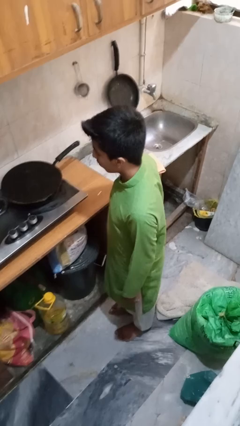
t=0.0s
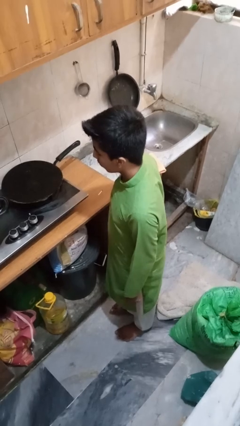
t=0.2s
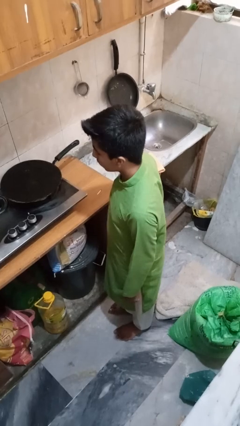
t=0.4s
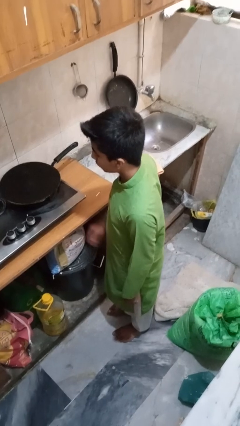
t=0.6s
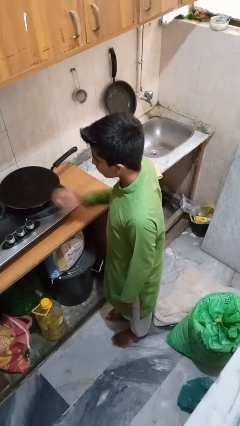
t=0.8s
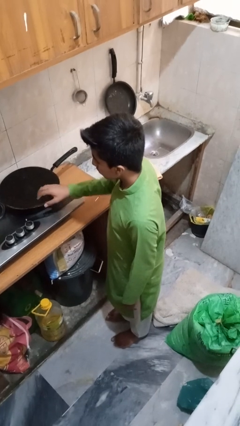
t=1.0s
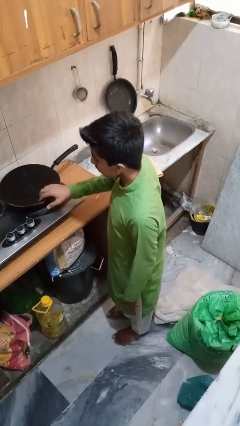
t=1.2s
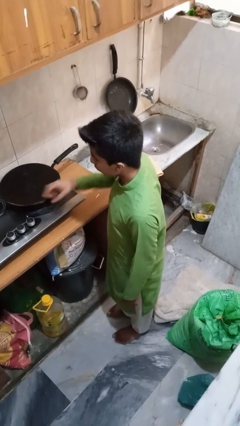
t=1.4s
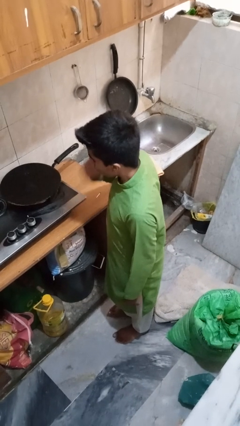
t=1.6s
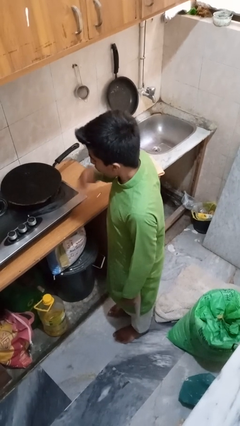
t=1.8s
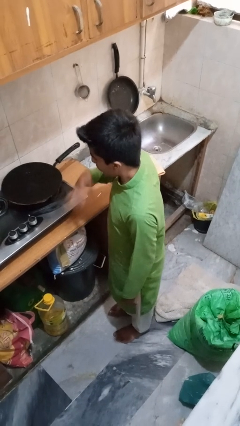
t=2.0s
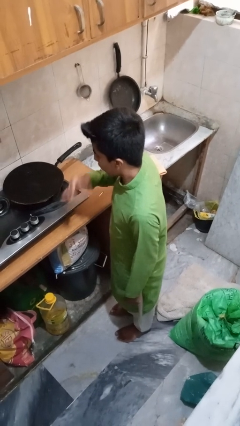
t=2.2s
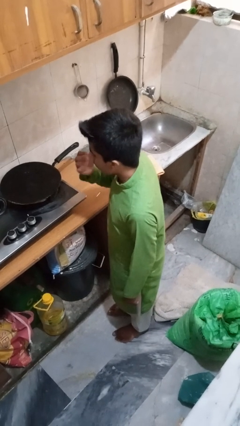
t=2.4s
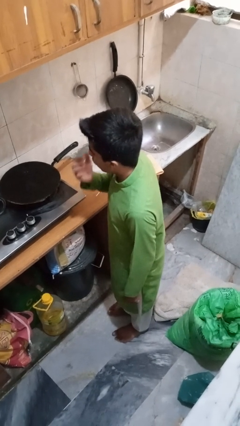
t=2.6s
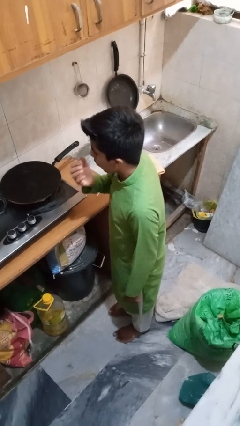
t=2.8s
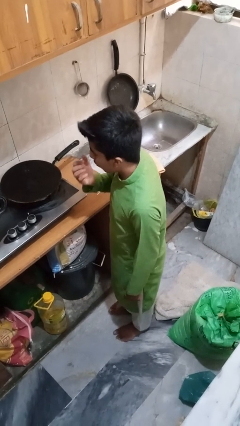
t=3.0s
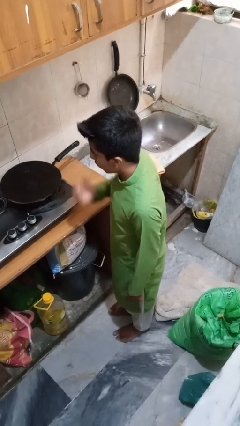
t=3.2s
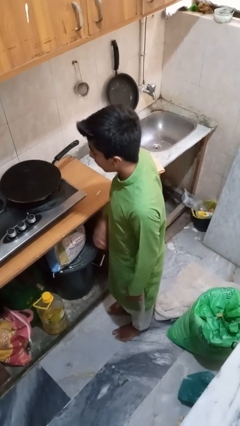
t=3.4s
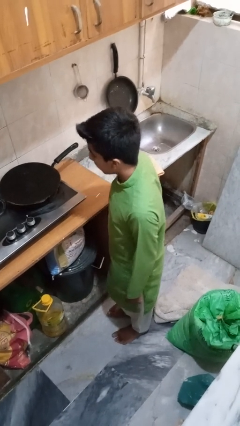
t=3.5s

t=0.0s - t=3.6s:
person burns hand

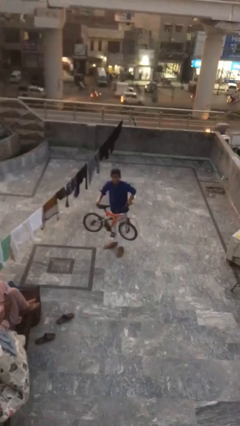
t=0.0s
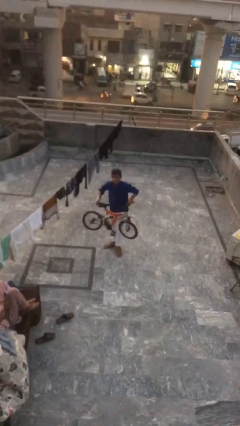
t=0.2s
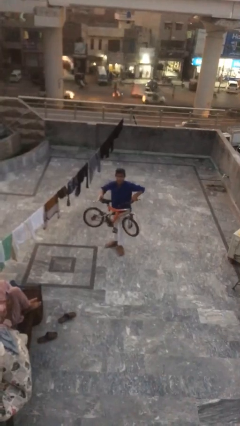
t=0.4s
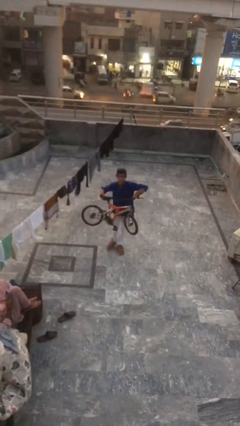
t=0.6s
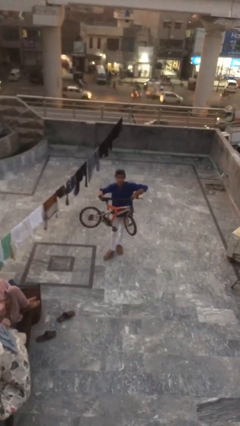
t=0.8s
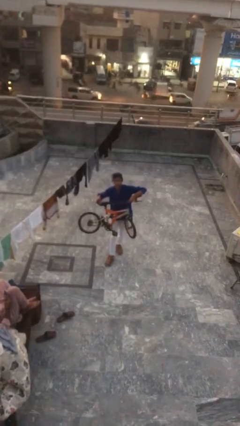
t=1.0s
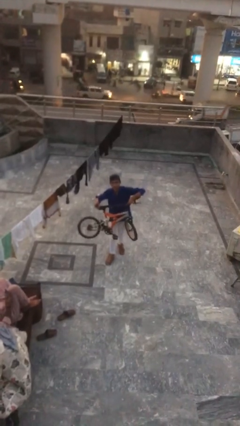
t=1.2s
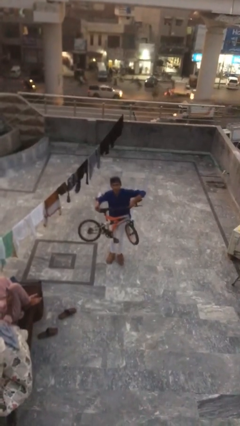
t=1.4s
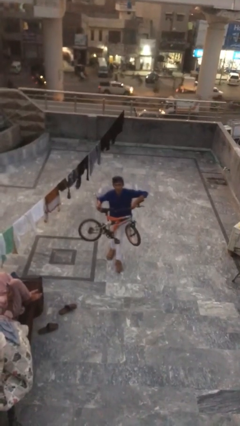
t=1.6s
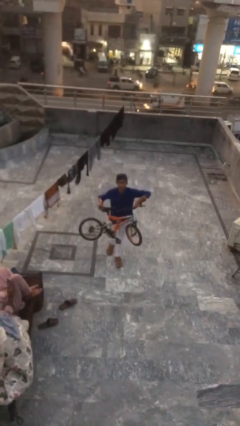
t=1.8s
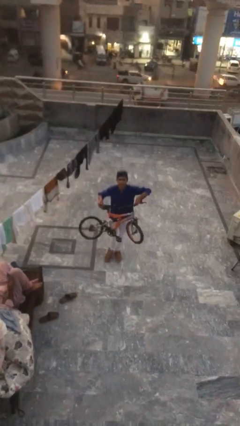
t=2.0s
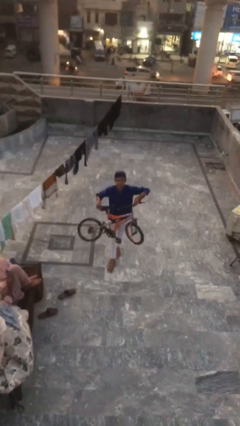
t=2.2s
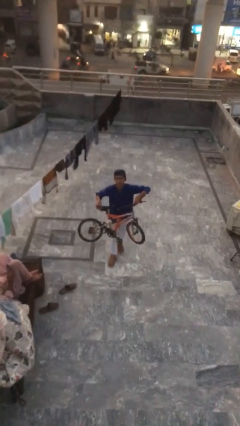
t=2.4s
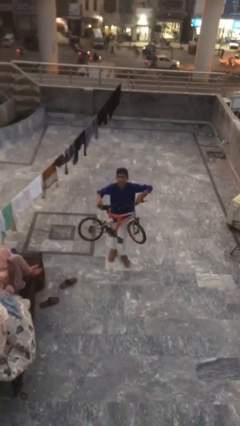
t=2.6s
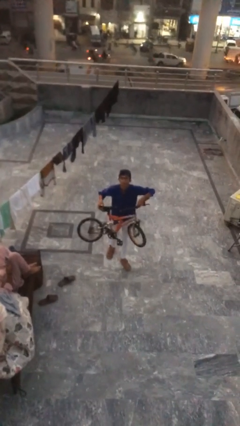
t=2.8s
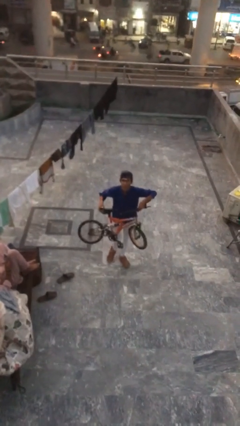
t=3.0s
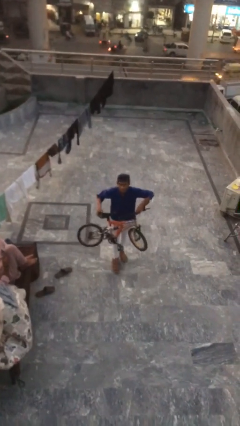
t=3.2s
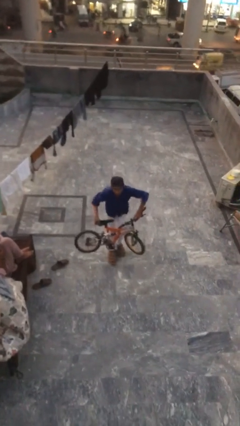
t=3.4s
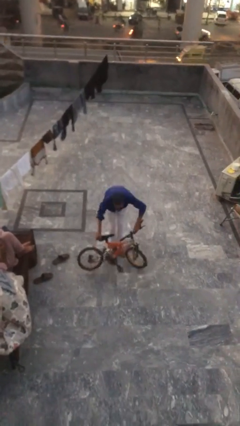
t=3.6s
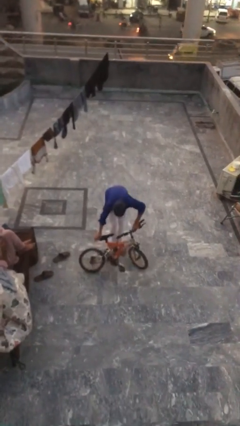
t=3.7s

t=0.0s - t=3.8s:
person carries heavy object

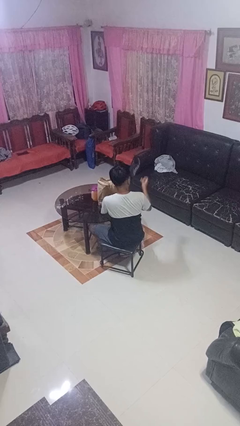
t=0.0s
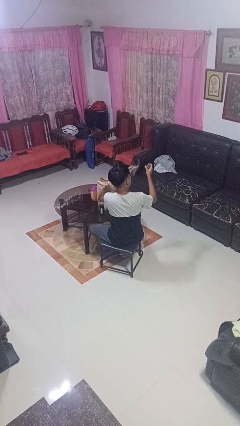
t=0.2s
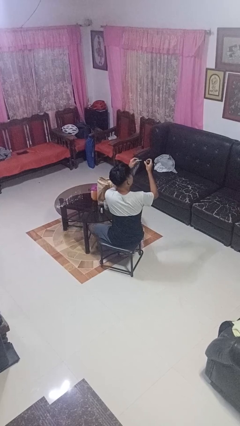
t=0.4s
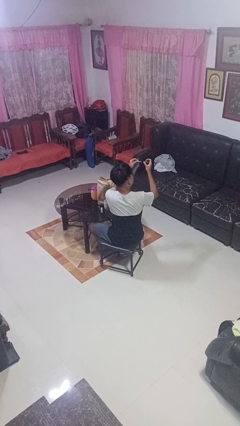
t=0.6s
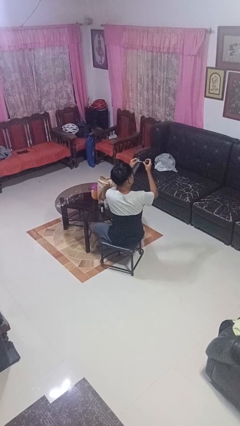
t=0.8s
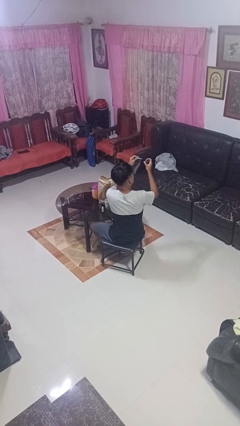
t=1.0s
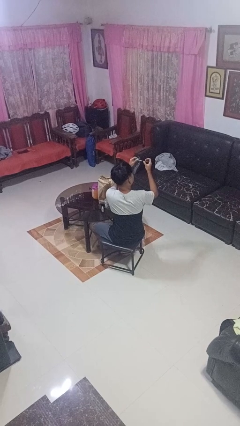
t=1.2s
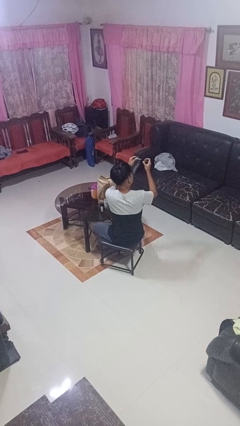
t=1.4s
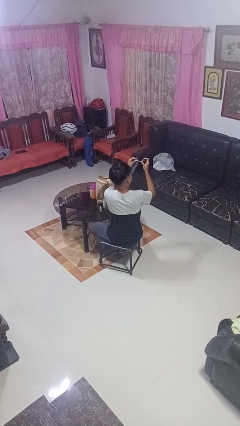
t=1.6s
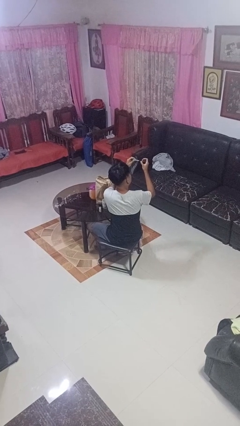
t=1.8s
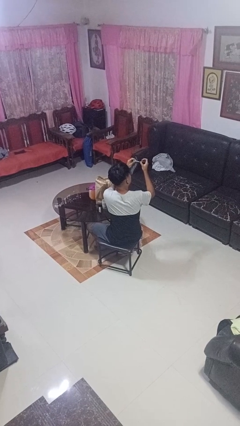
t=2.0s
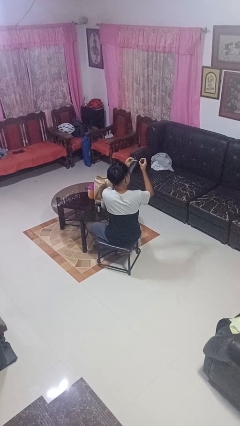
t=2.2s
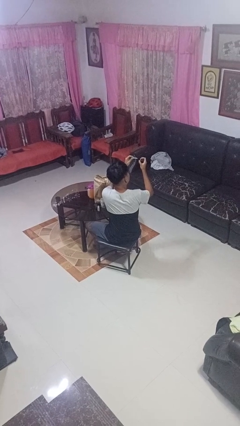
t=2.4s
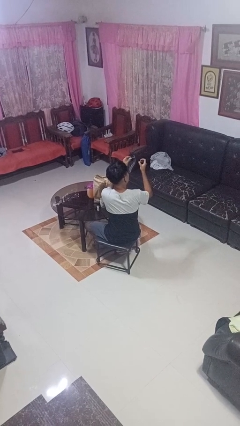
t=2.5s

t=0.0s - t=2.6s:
person paints fingernails

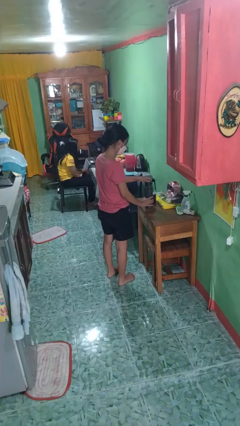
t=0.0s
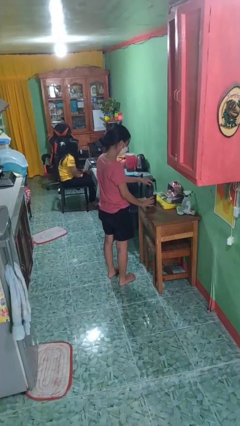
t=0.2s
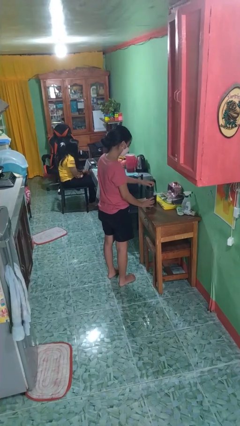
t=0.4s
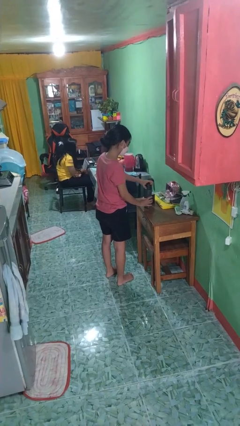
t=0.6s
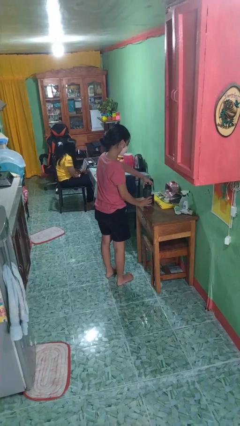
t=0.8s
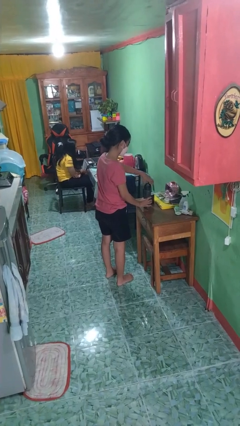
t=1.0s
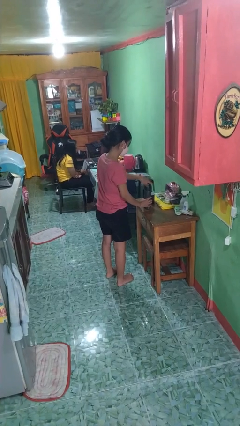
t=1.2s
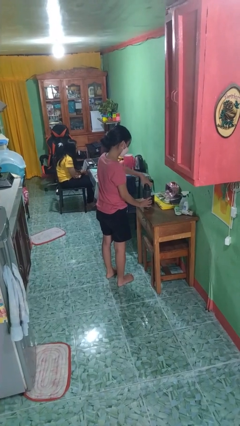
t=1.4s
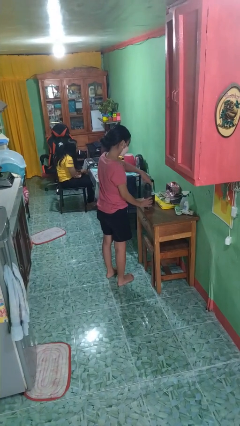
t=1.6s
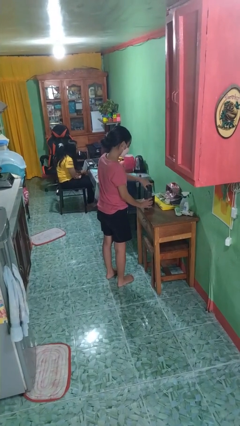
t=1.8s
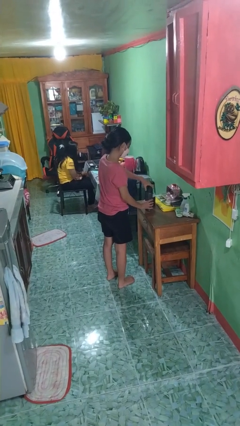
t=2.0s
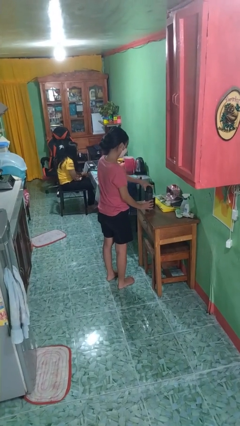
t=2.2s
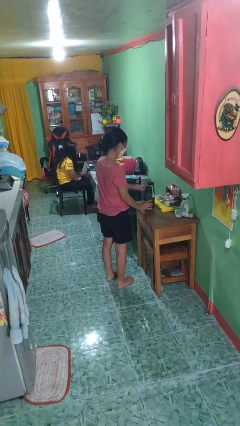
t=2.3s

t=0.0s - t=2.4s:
person screws lid to bottle

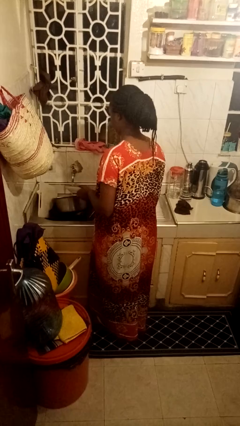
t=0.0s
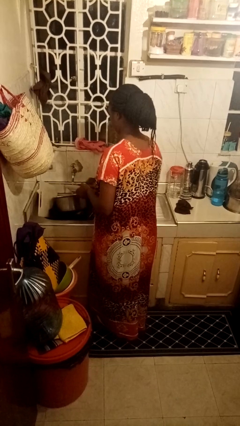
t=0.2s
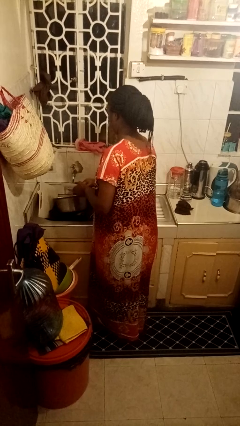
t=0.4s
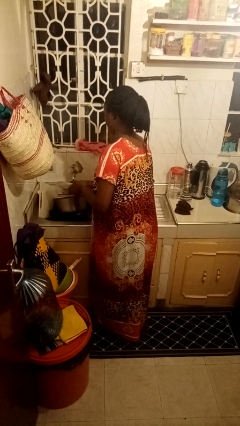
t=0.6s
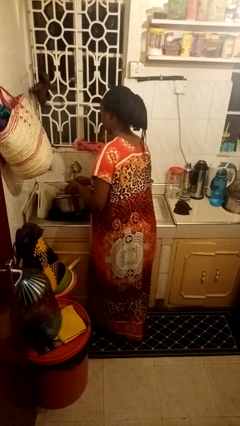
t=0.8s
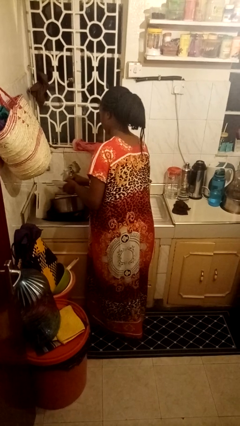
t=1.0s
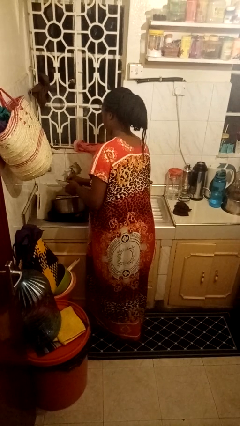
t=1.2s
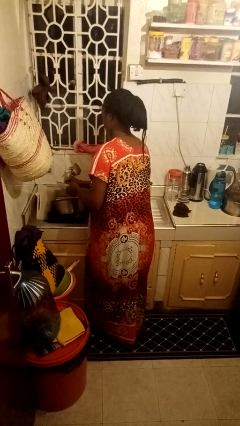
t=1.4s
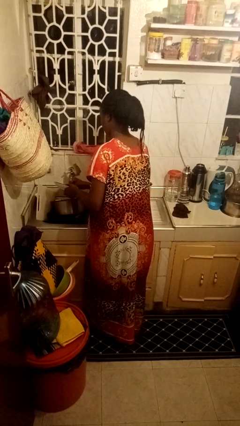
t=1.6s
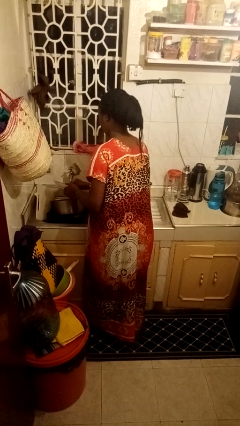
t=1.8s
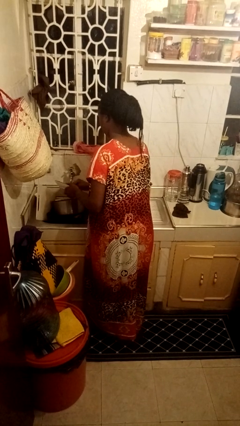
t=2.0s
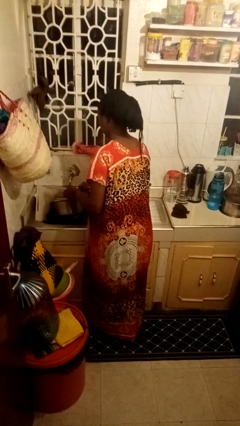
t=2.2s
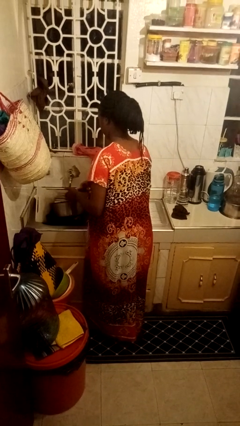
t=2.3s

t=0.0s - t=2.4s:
person washes dish

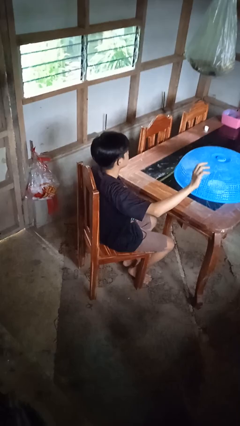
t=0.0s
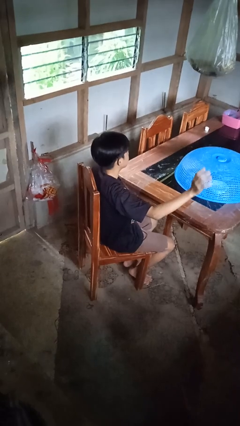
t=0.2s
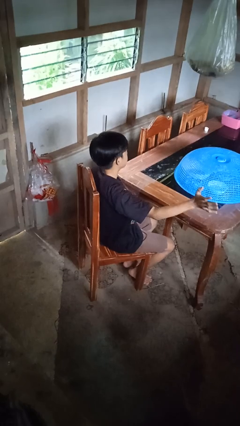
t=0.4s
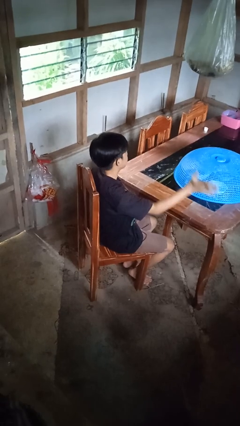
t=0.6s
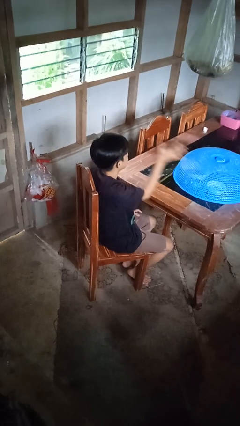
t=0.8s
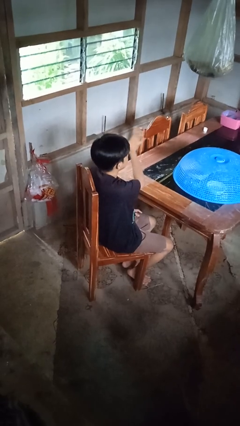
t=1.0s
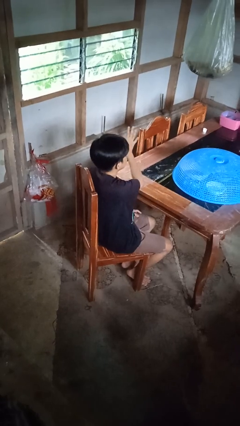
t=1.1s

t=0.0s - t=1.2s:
person gestures swipe right

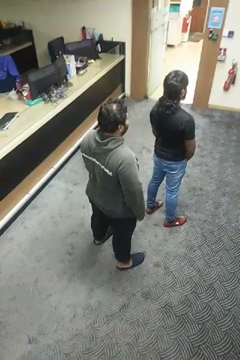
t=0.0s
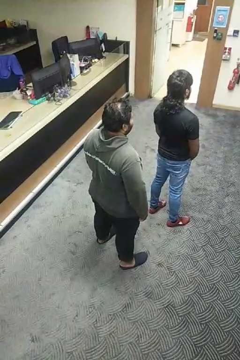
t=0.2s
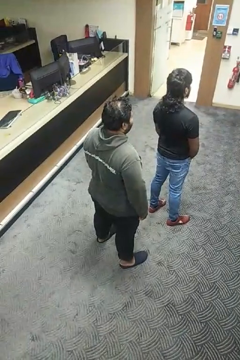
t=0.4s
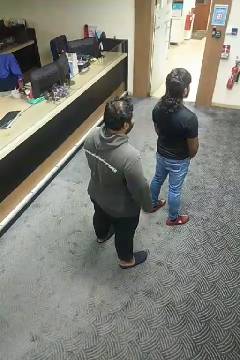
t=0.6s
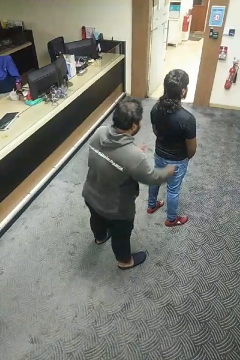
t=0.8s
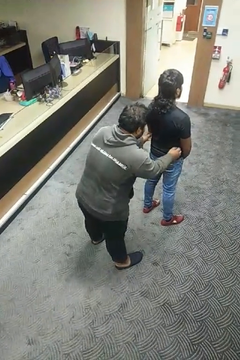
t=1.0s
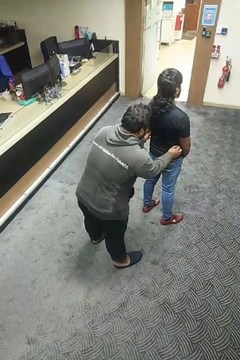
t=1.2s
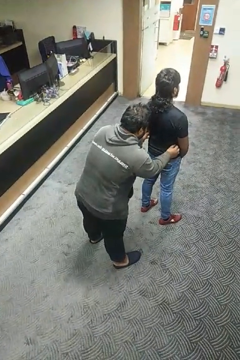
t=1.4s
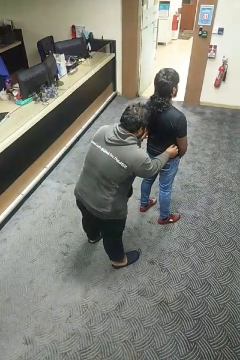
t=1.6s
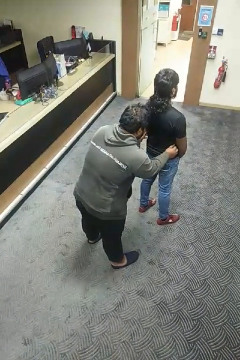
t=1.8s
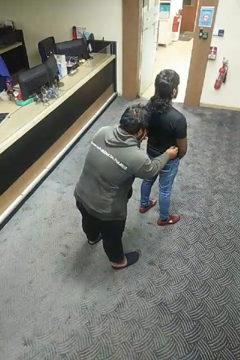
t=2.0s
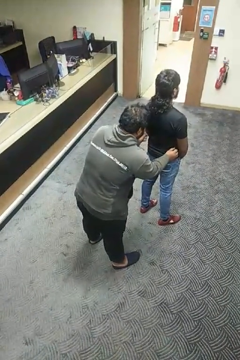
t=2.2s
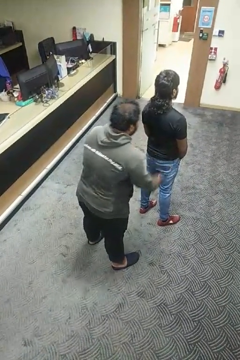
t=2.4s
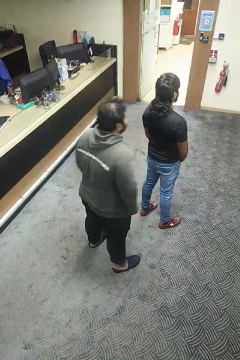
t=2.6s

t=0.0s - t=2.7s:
person tickles person
